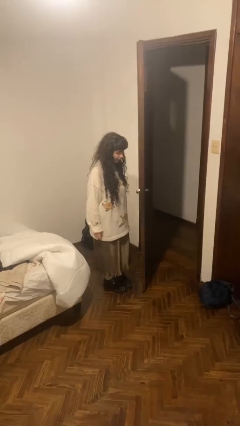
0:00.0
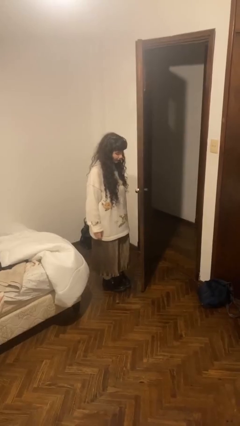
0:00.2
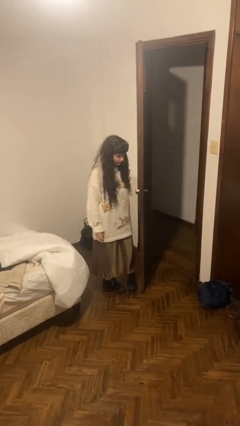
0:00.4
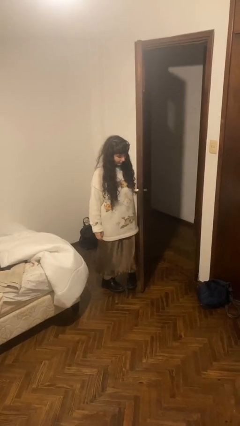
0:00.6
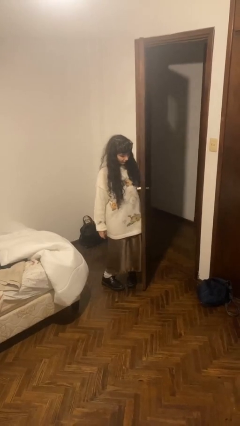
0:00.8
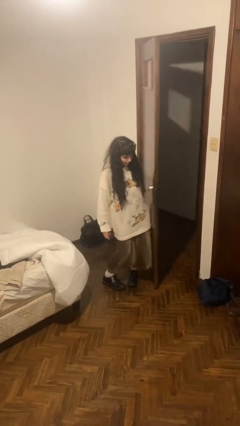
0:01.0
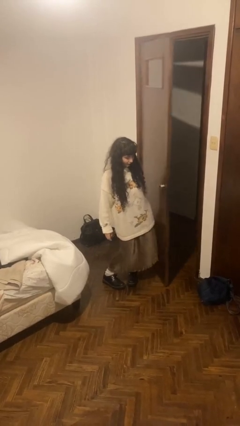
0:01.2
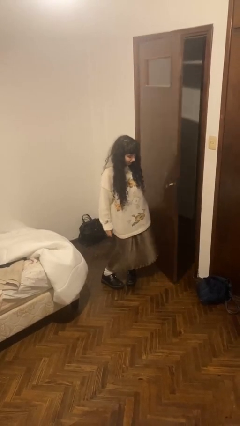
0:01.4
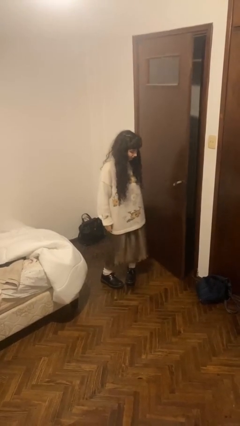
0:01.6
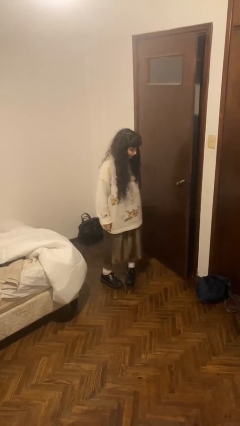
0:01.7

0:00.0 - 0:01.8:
person closes door with hip

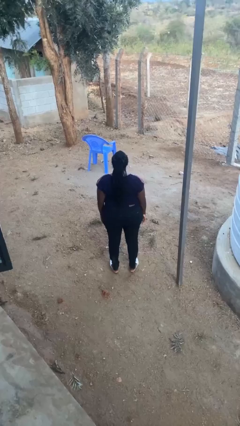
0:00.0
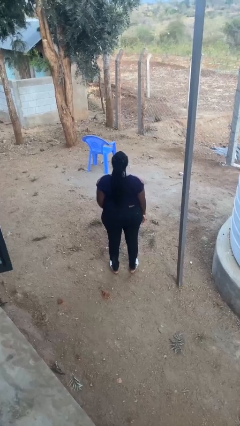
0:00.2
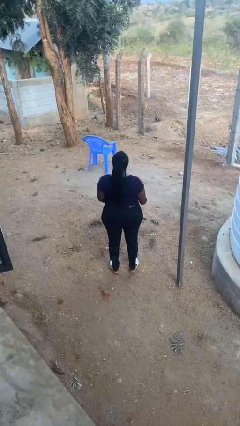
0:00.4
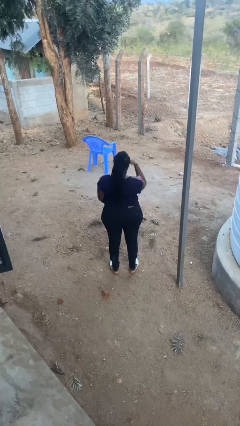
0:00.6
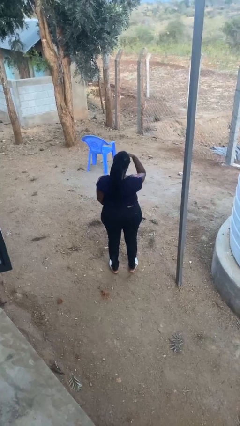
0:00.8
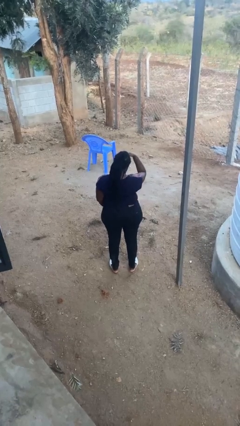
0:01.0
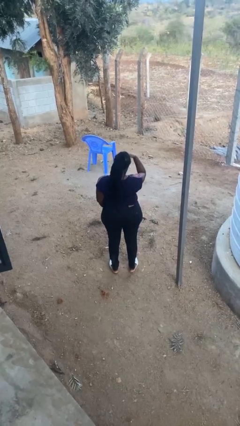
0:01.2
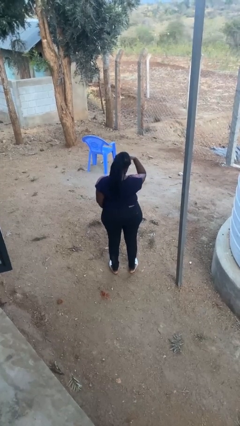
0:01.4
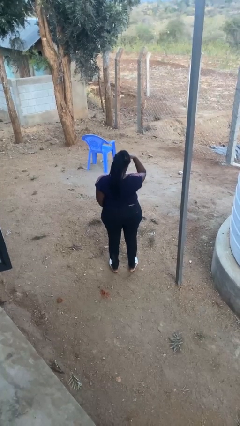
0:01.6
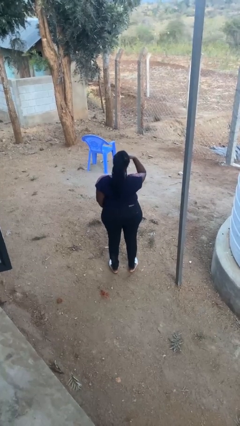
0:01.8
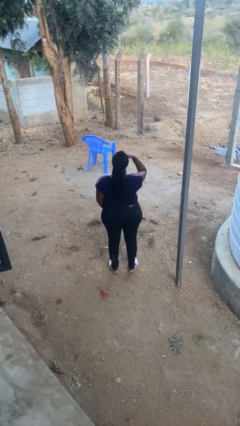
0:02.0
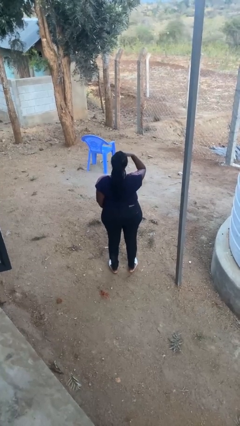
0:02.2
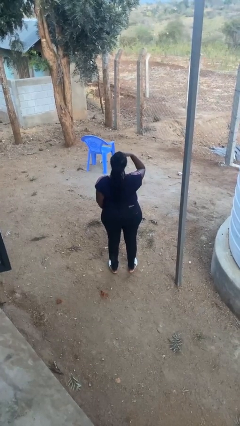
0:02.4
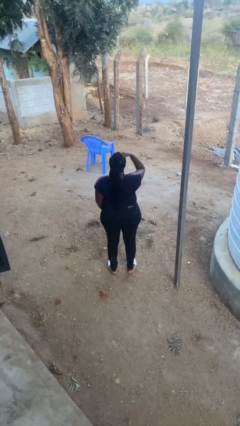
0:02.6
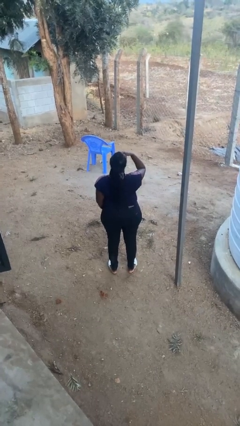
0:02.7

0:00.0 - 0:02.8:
person shades eyes

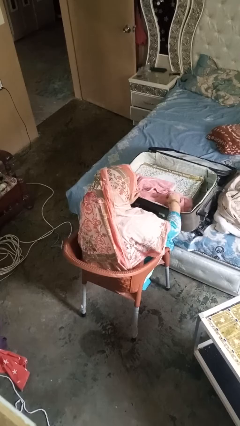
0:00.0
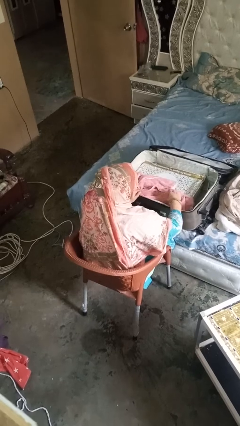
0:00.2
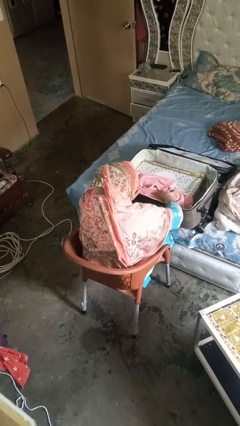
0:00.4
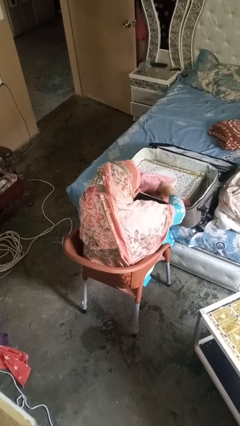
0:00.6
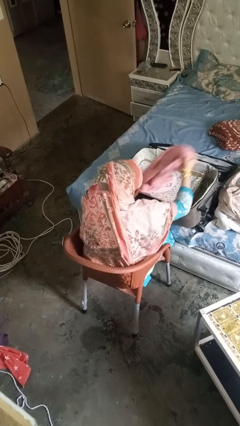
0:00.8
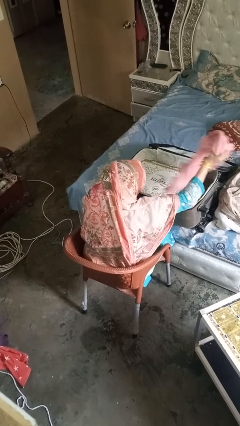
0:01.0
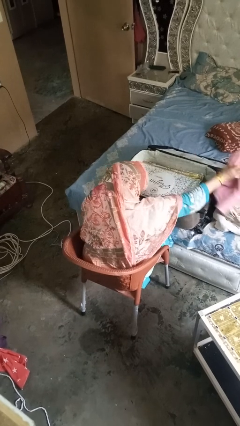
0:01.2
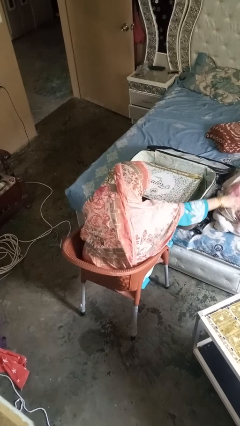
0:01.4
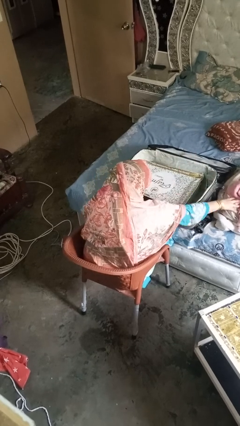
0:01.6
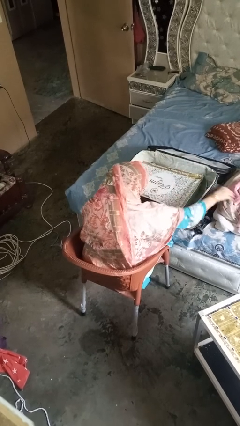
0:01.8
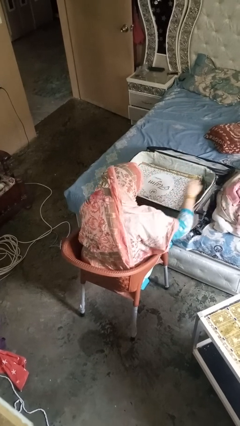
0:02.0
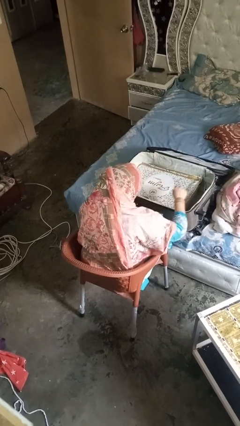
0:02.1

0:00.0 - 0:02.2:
person unloads clothes from suitcase

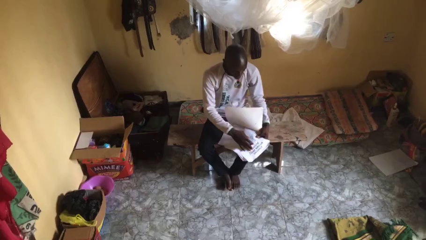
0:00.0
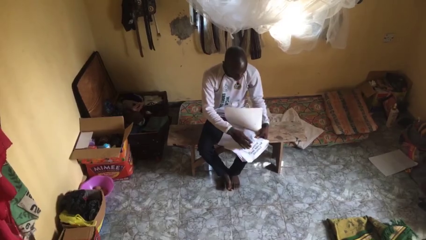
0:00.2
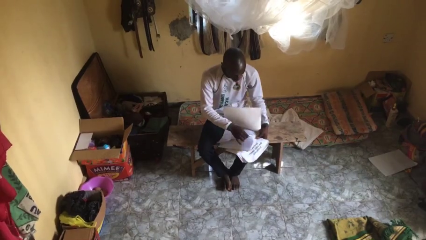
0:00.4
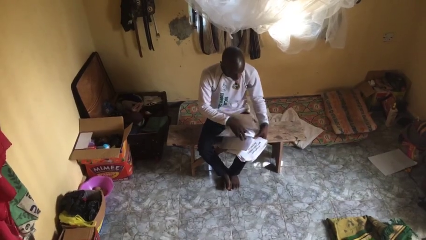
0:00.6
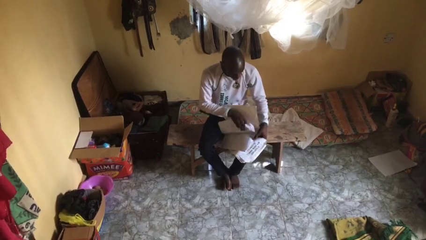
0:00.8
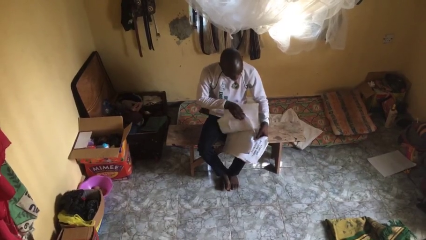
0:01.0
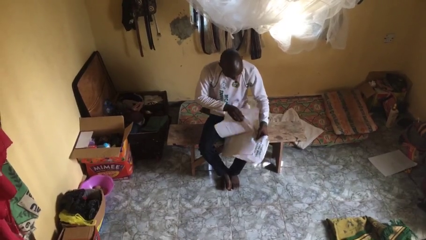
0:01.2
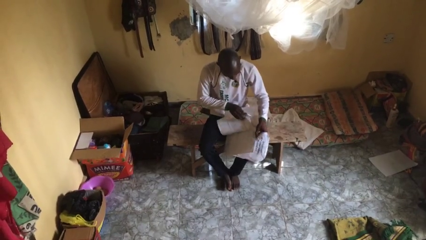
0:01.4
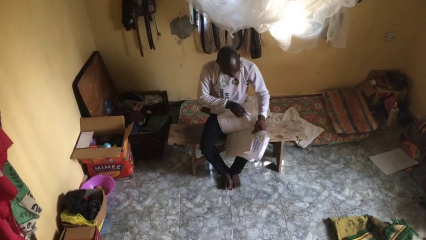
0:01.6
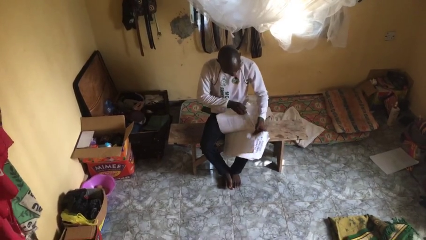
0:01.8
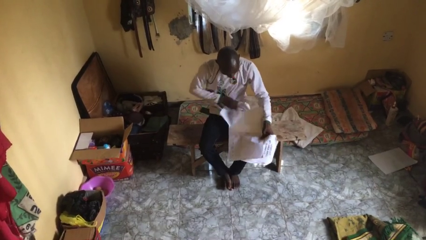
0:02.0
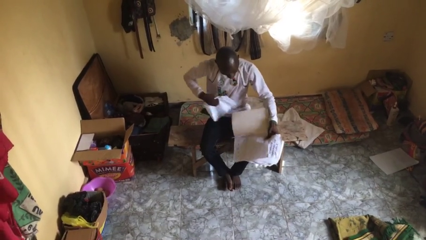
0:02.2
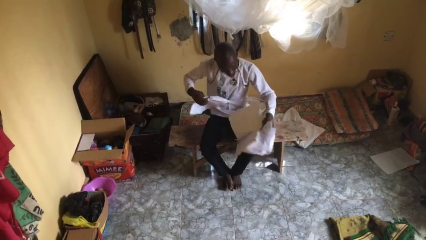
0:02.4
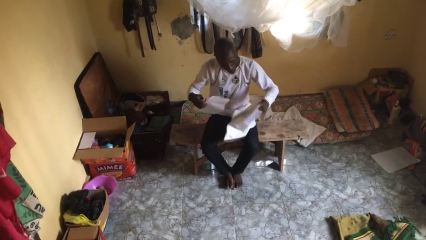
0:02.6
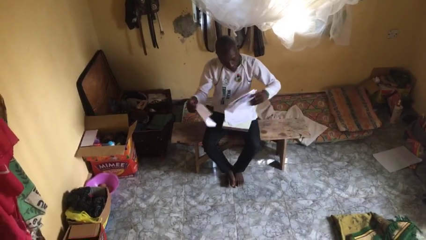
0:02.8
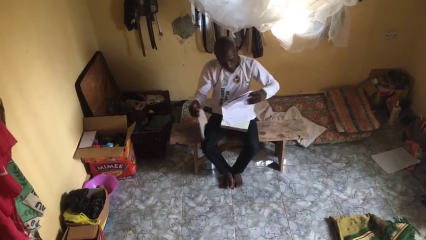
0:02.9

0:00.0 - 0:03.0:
person tears paper

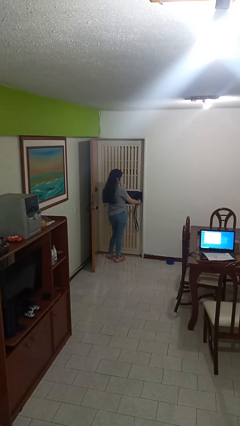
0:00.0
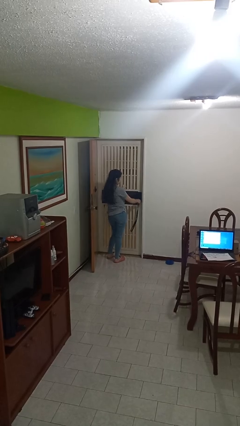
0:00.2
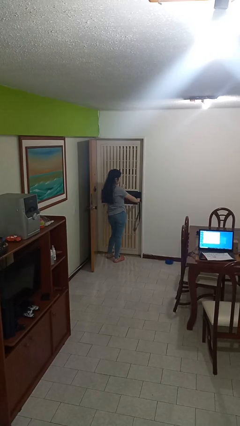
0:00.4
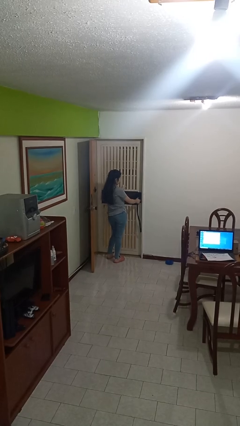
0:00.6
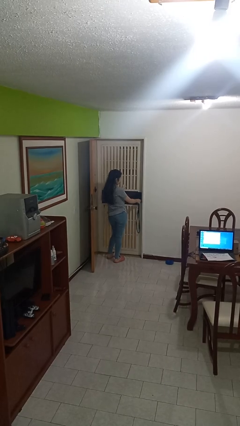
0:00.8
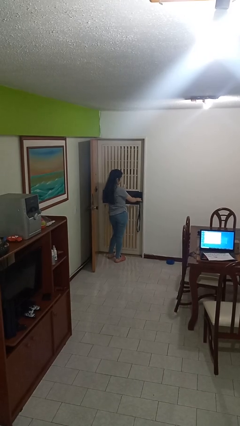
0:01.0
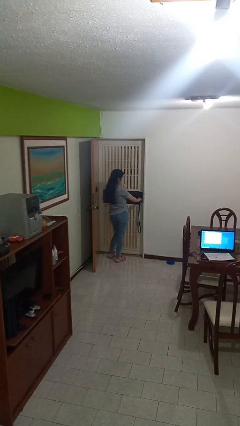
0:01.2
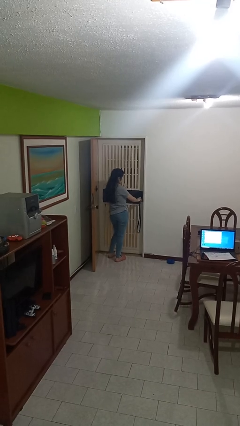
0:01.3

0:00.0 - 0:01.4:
person unlocks door with keys

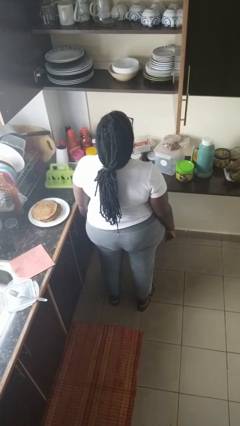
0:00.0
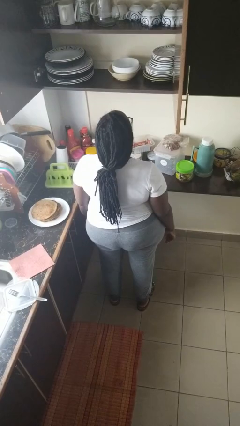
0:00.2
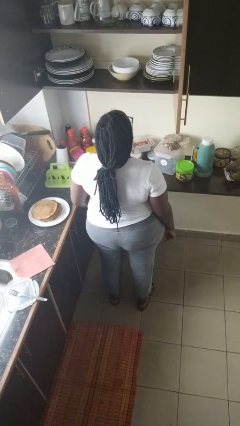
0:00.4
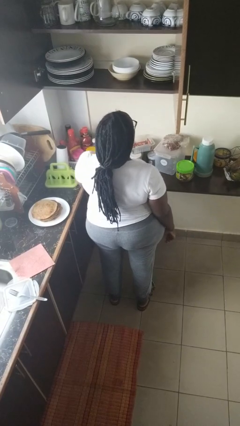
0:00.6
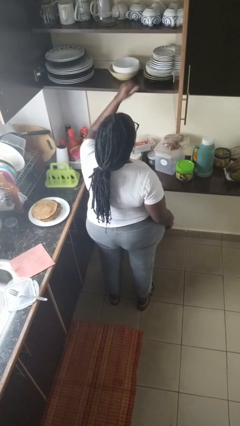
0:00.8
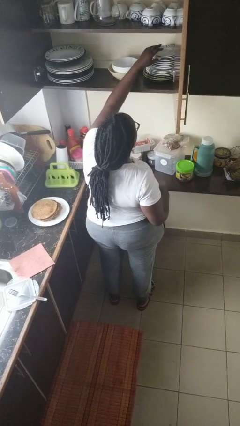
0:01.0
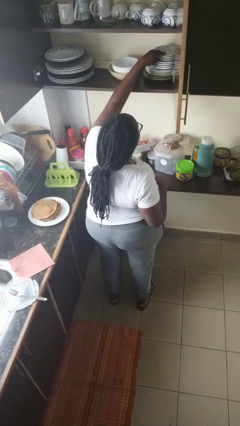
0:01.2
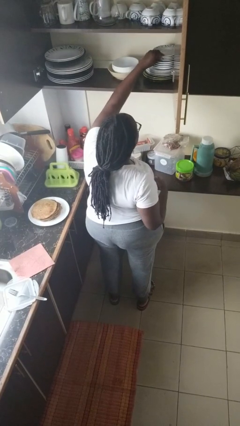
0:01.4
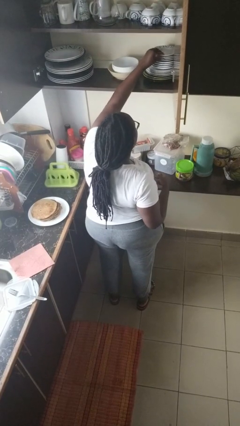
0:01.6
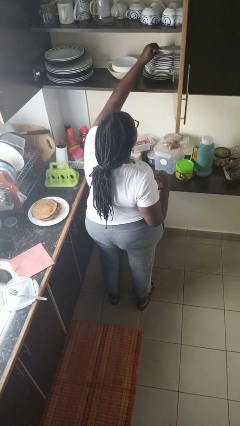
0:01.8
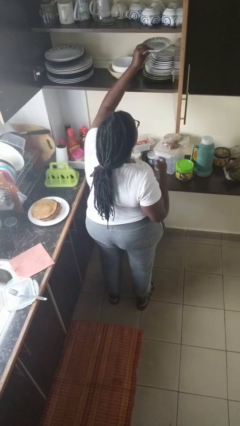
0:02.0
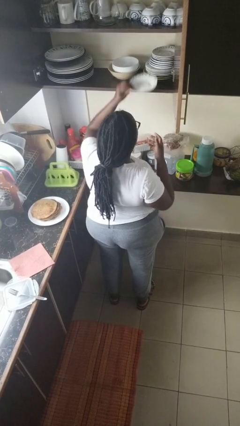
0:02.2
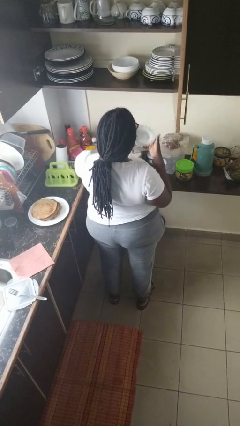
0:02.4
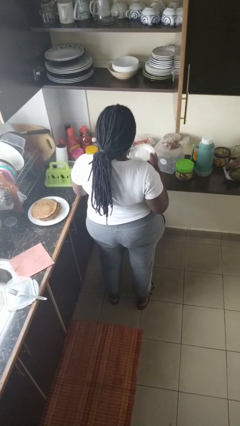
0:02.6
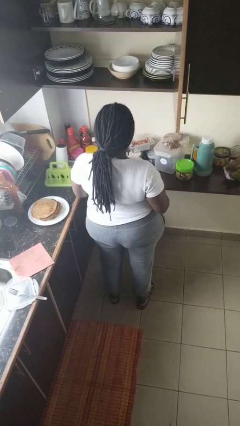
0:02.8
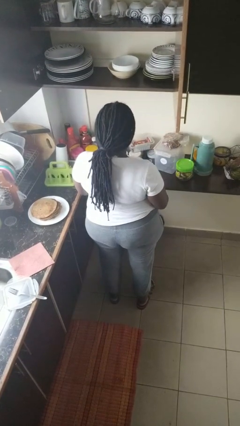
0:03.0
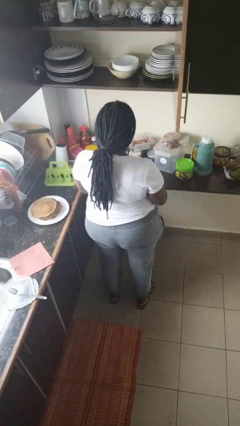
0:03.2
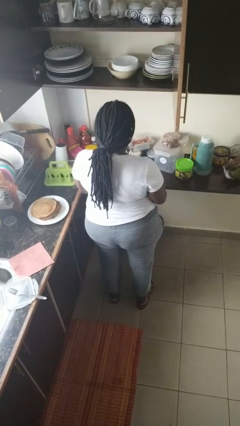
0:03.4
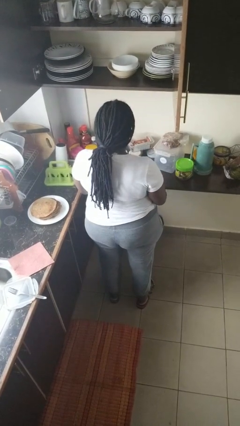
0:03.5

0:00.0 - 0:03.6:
person takes object from cabinet

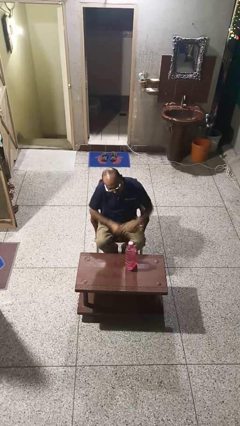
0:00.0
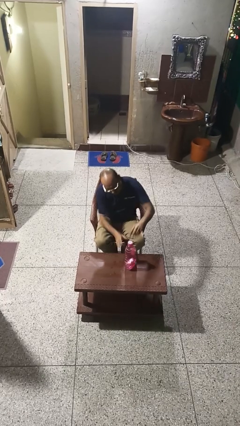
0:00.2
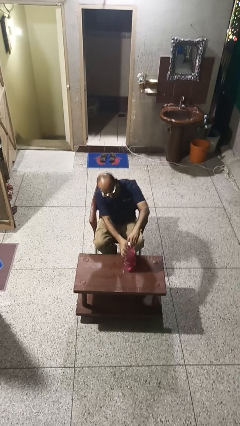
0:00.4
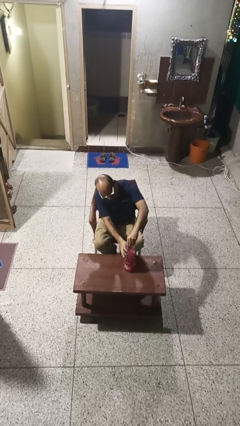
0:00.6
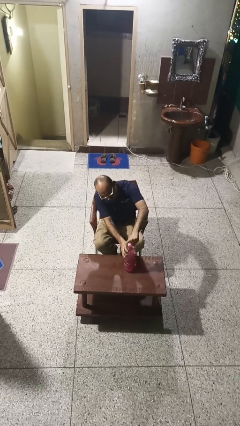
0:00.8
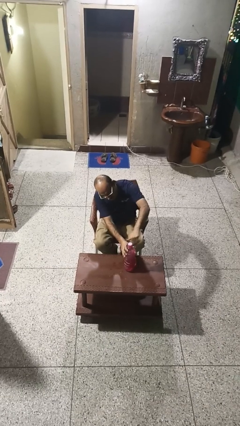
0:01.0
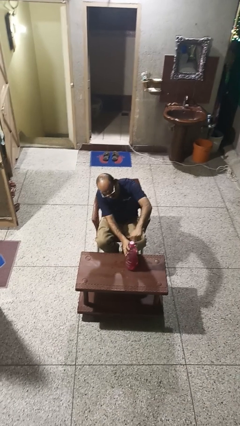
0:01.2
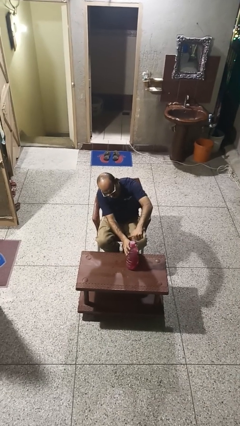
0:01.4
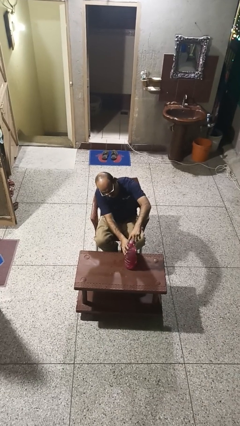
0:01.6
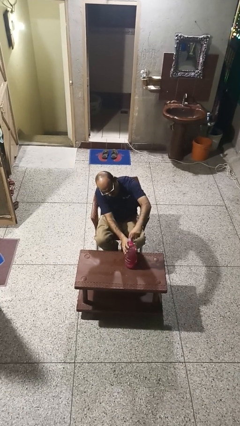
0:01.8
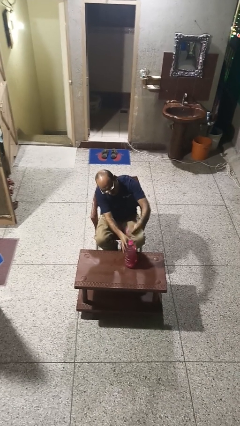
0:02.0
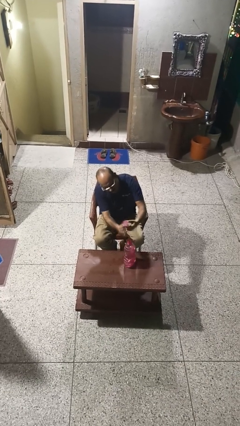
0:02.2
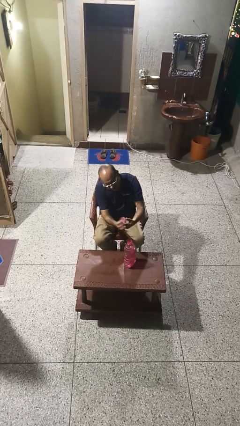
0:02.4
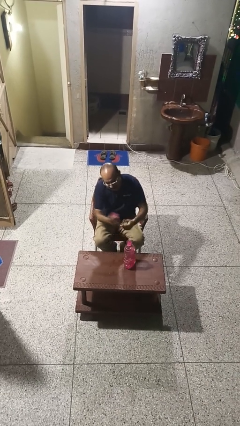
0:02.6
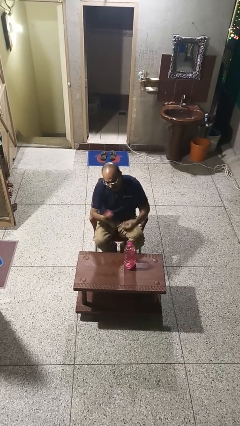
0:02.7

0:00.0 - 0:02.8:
person unscrews lid from bottle
